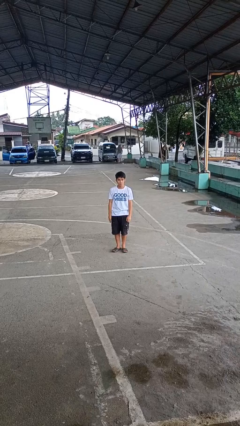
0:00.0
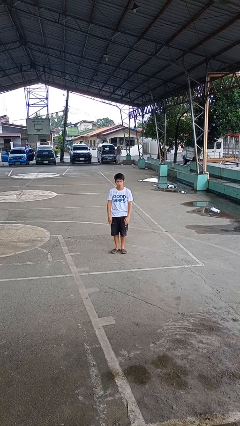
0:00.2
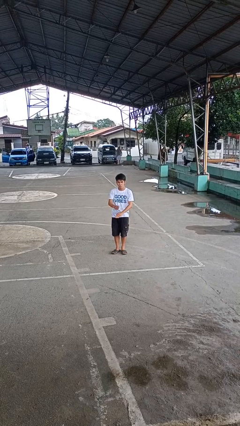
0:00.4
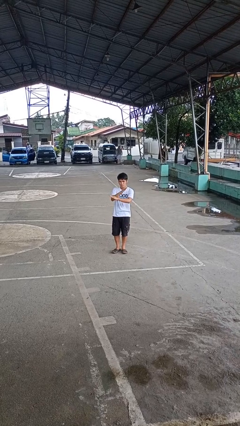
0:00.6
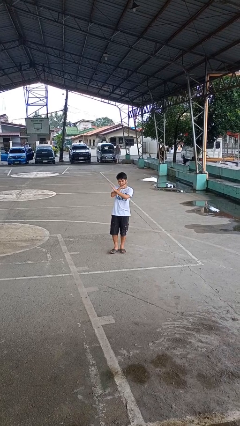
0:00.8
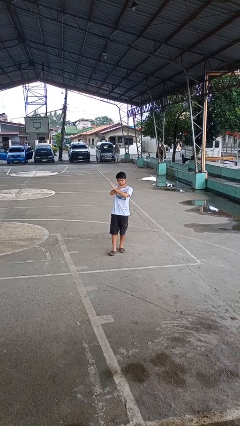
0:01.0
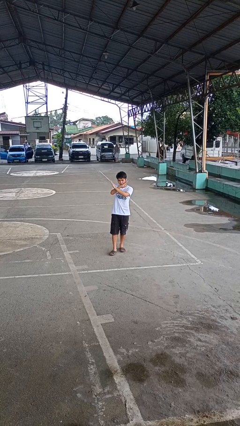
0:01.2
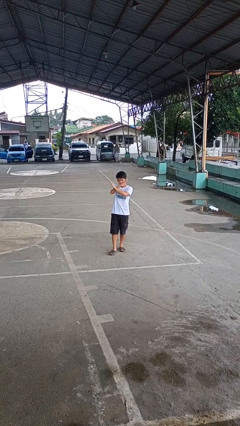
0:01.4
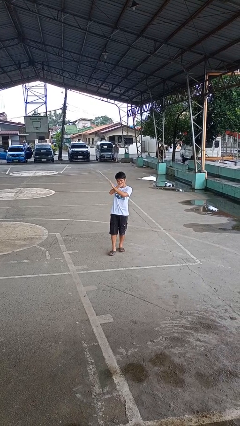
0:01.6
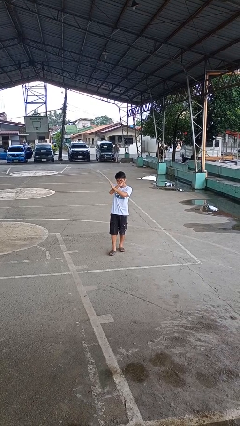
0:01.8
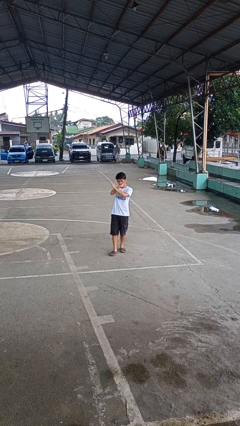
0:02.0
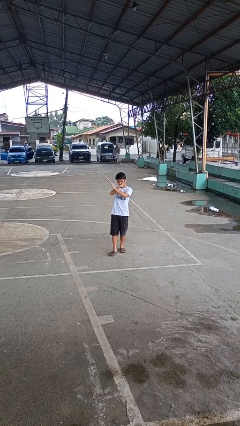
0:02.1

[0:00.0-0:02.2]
person gestures arms x

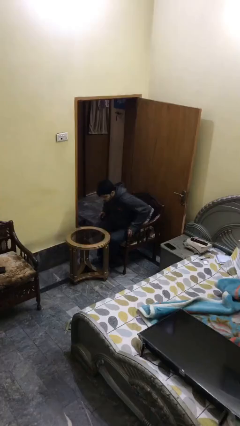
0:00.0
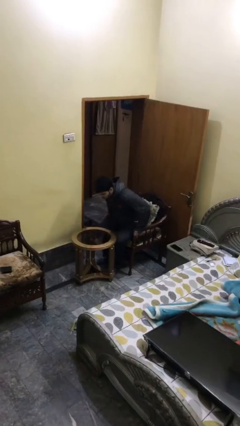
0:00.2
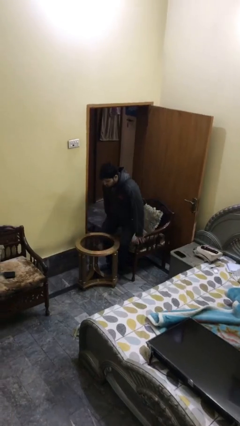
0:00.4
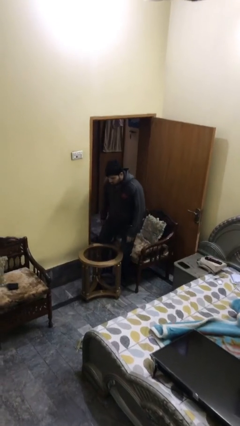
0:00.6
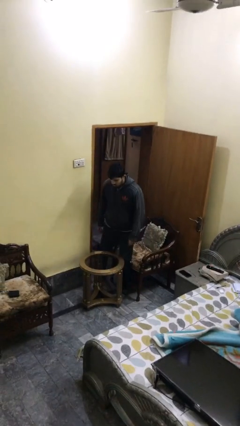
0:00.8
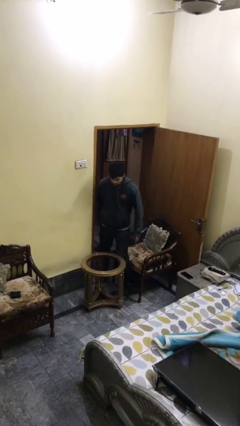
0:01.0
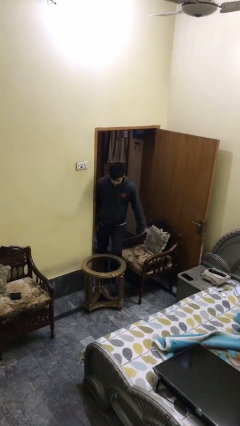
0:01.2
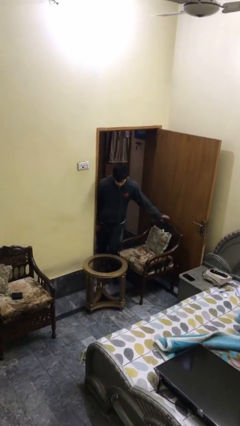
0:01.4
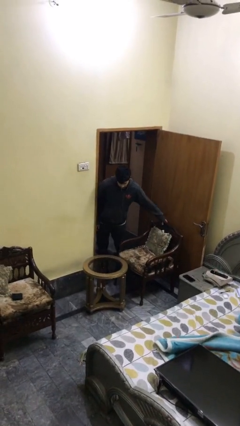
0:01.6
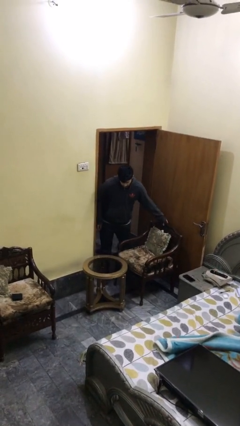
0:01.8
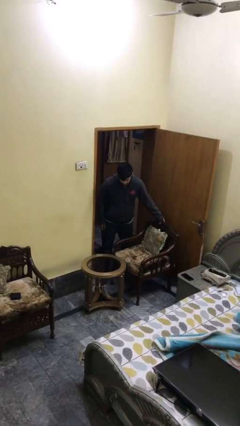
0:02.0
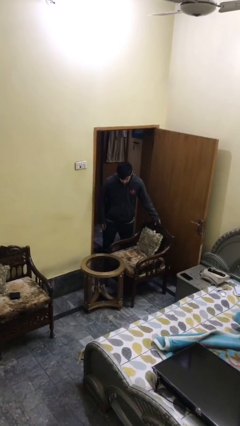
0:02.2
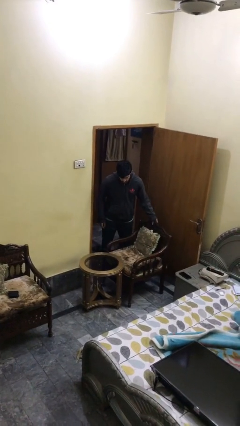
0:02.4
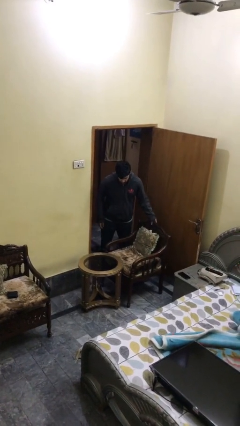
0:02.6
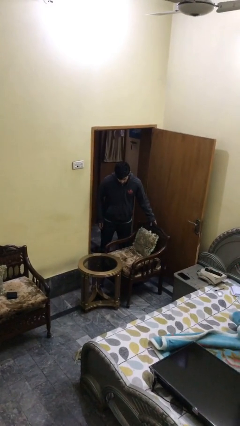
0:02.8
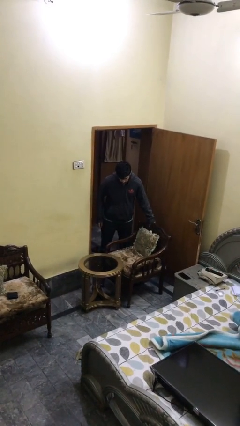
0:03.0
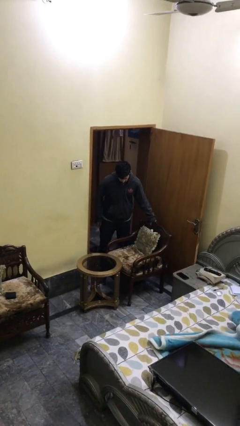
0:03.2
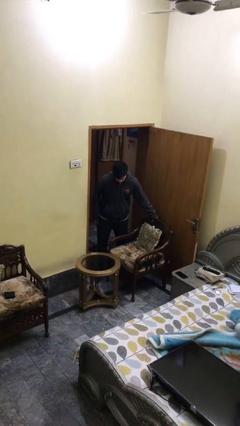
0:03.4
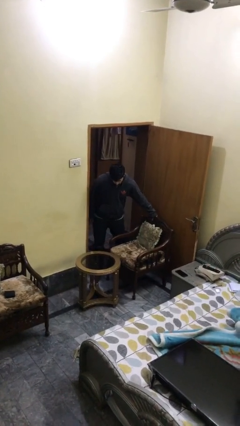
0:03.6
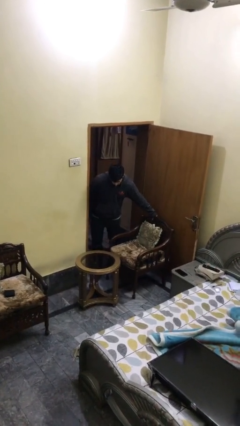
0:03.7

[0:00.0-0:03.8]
person stands up

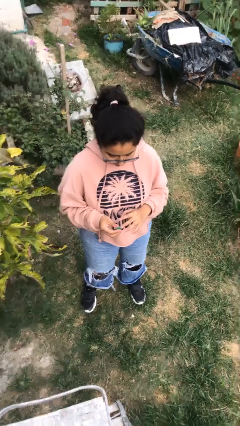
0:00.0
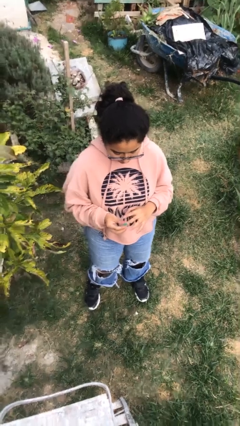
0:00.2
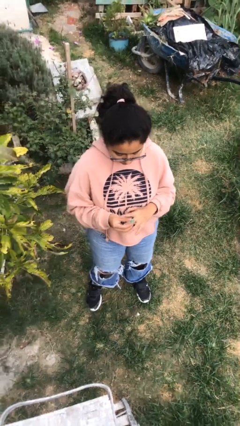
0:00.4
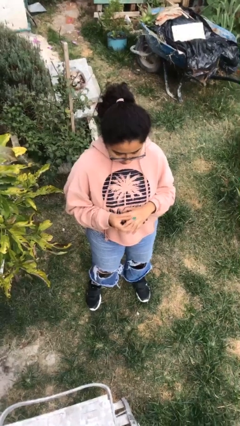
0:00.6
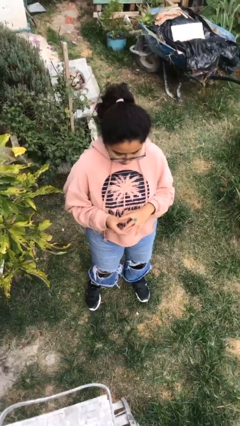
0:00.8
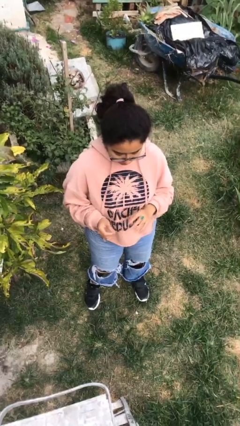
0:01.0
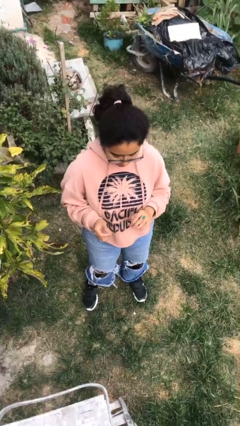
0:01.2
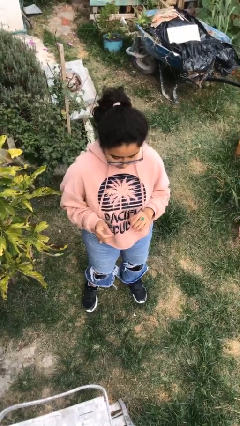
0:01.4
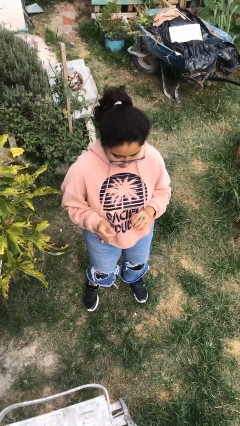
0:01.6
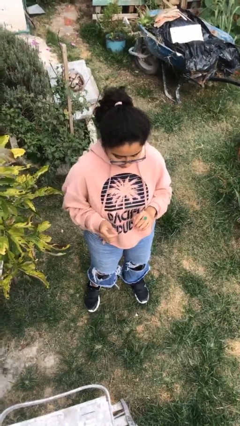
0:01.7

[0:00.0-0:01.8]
person puts on ring

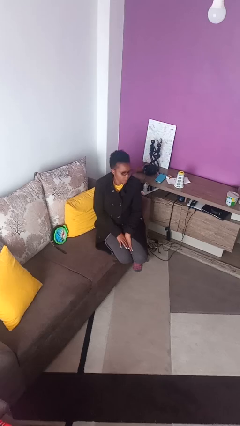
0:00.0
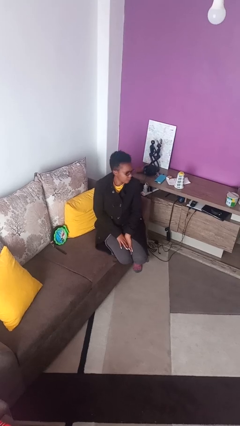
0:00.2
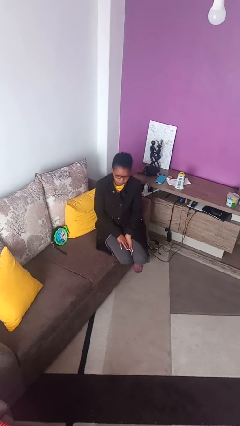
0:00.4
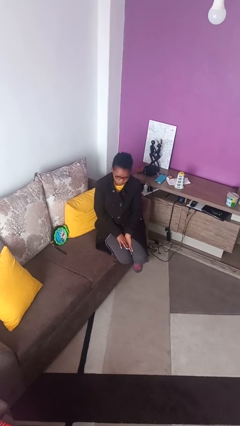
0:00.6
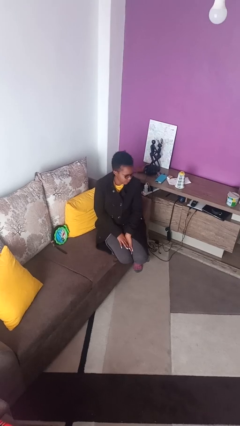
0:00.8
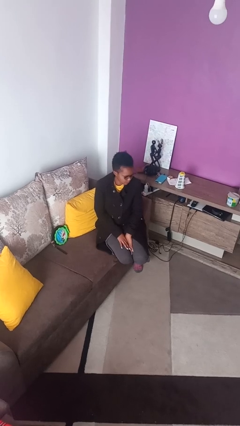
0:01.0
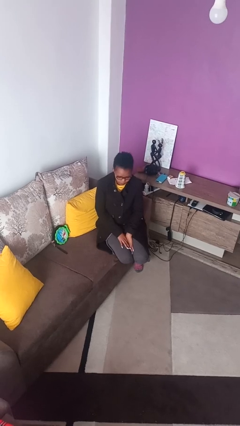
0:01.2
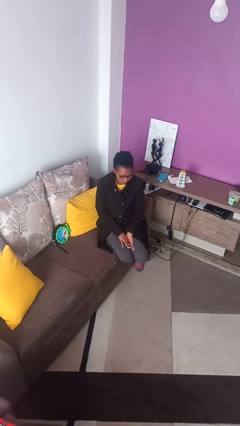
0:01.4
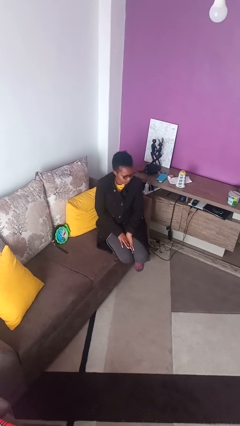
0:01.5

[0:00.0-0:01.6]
person shakes head

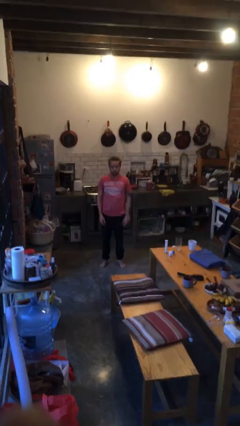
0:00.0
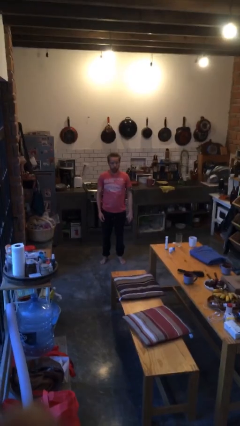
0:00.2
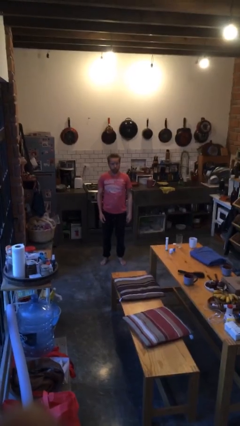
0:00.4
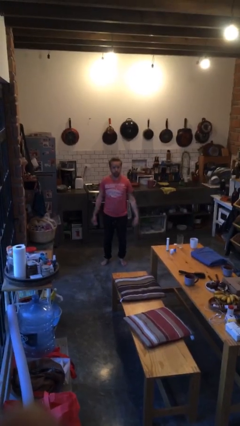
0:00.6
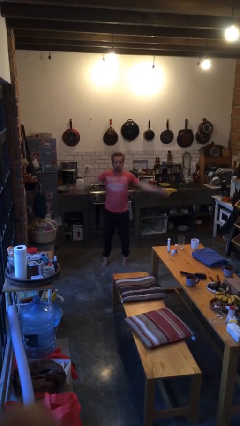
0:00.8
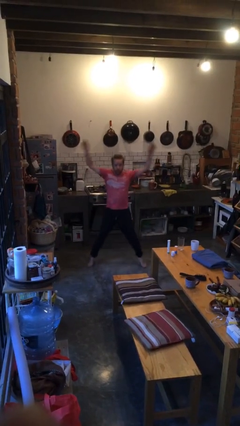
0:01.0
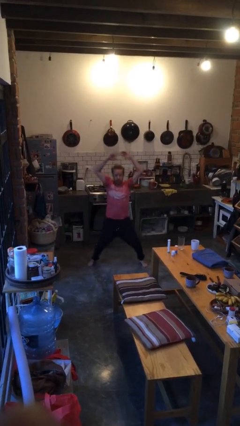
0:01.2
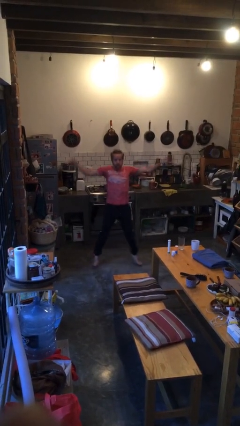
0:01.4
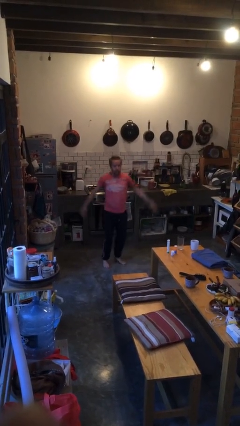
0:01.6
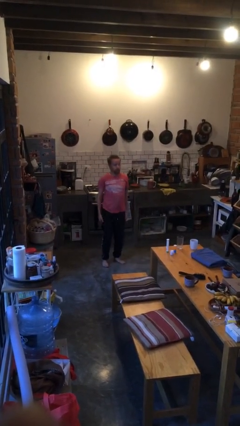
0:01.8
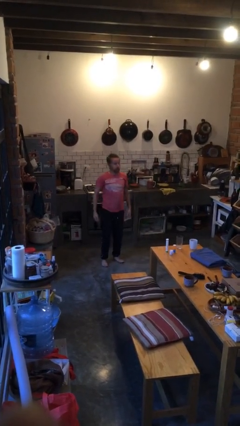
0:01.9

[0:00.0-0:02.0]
person exercises with jumping jacks

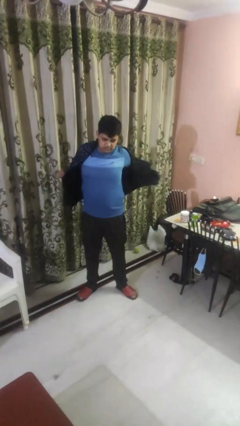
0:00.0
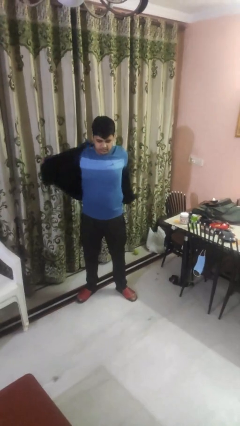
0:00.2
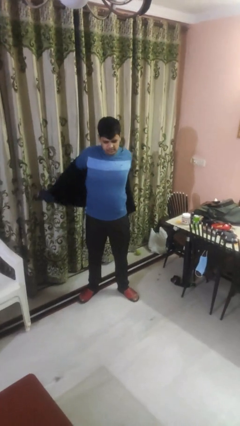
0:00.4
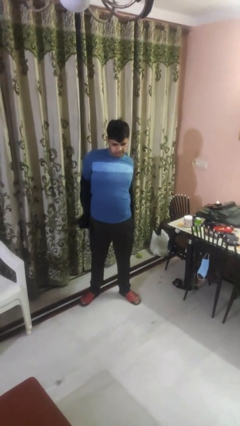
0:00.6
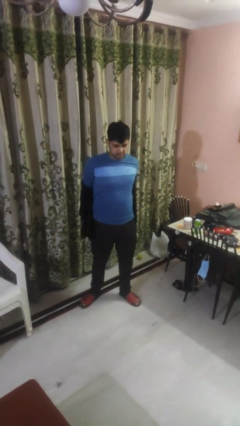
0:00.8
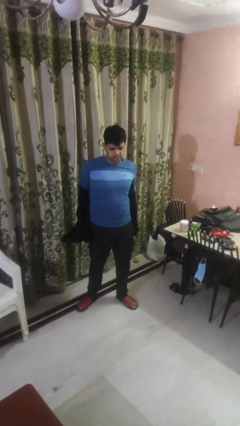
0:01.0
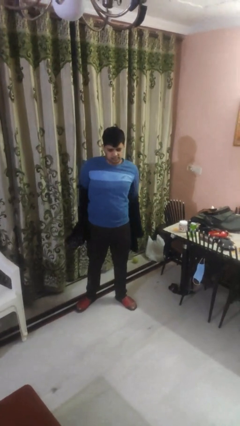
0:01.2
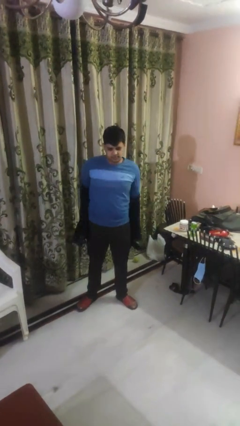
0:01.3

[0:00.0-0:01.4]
person takes off shirt

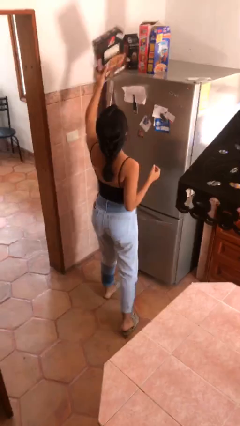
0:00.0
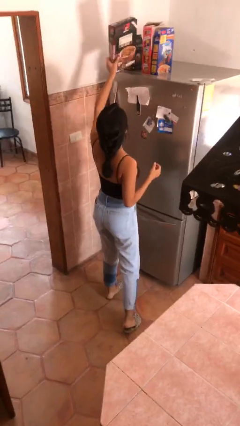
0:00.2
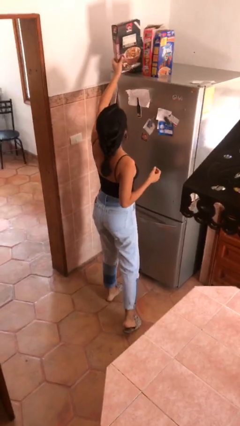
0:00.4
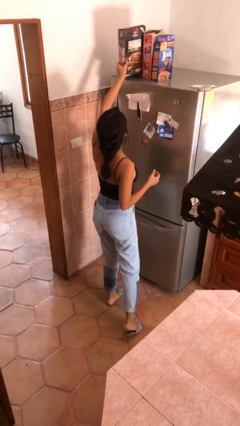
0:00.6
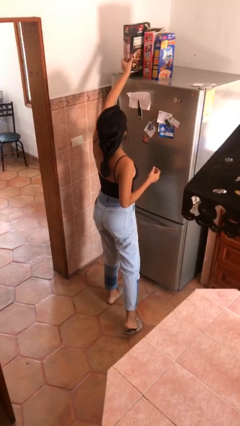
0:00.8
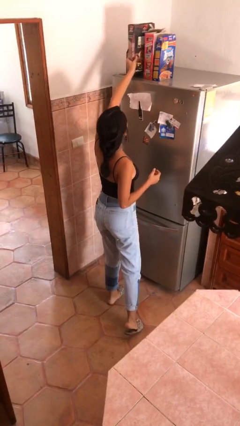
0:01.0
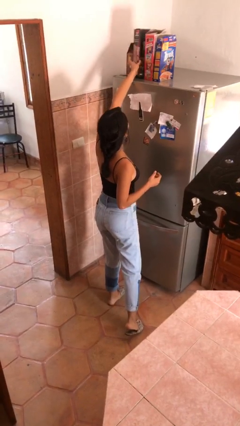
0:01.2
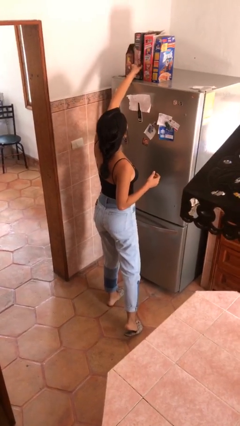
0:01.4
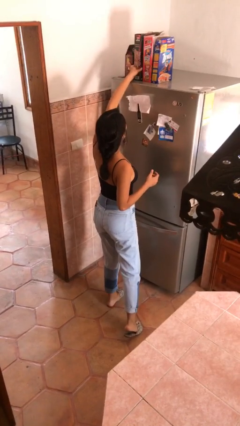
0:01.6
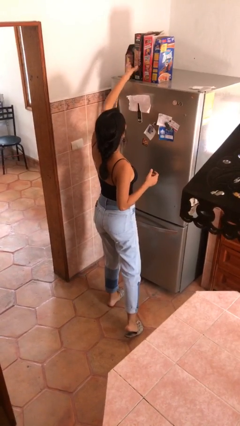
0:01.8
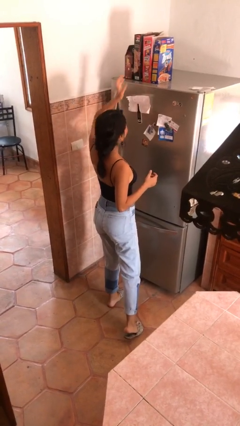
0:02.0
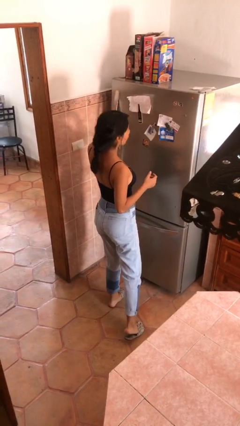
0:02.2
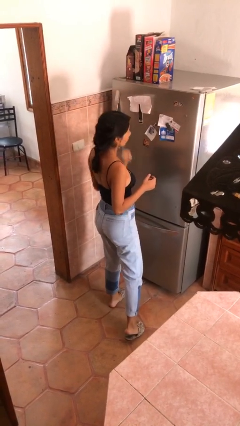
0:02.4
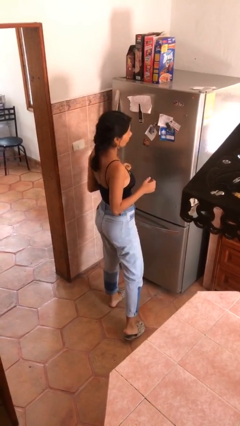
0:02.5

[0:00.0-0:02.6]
person puts down object on shelf

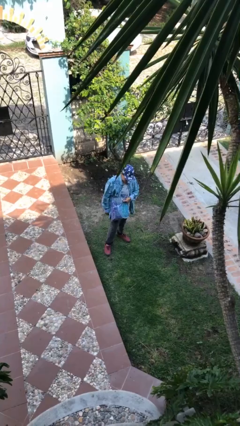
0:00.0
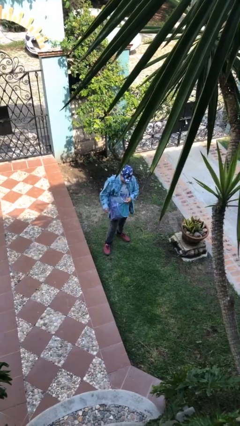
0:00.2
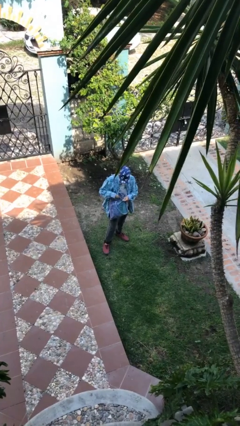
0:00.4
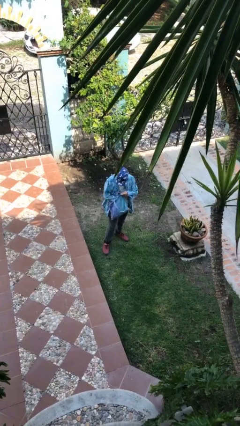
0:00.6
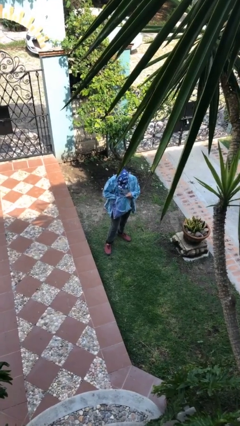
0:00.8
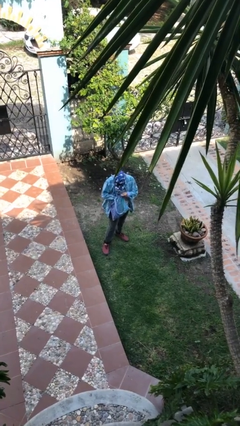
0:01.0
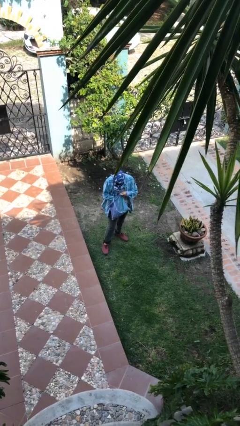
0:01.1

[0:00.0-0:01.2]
person searches in purse
